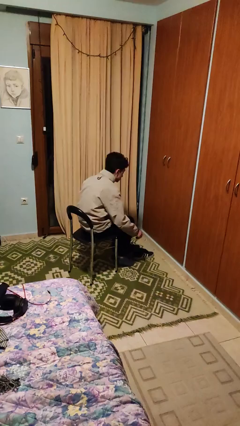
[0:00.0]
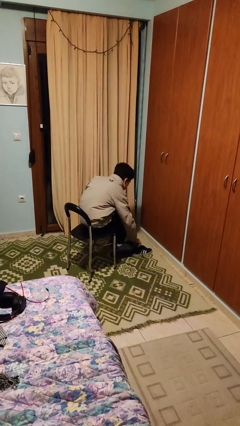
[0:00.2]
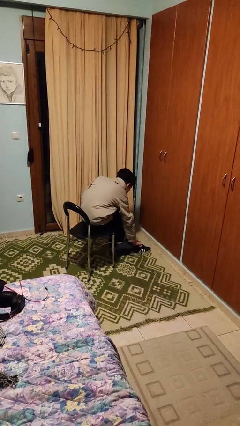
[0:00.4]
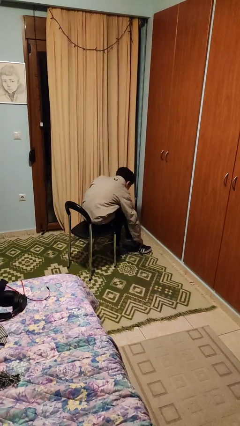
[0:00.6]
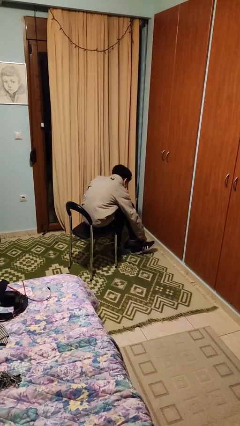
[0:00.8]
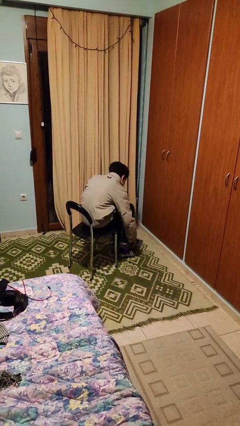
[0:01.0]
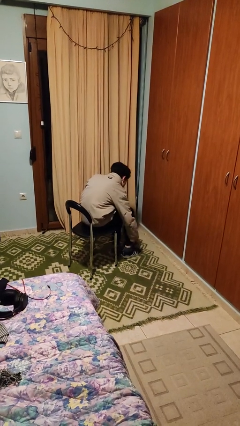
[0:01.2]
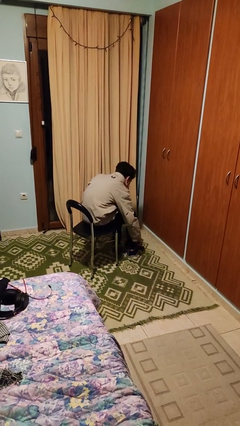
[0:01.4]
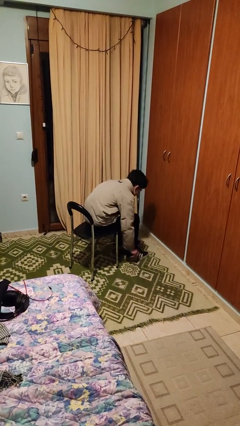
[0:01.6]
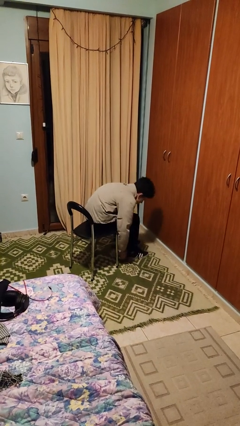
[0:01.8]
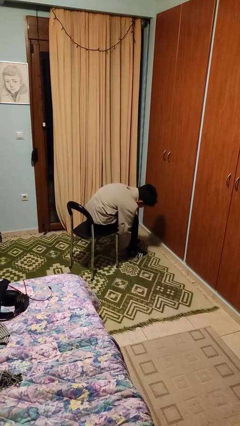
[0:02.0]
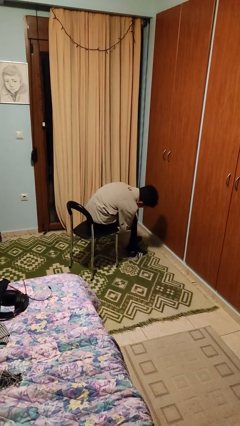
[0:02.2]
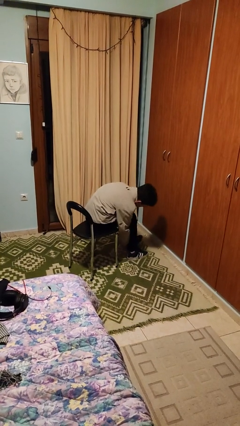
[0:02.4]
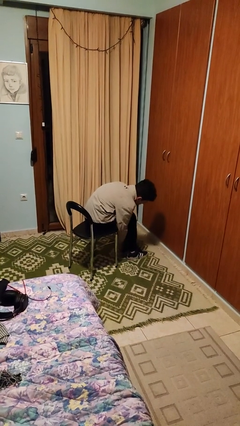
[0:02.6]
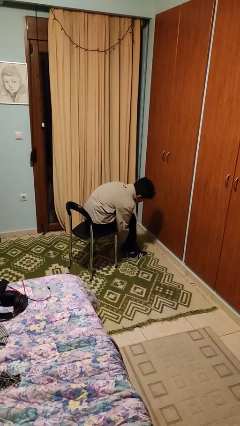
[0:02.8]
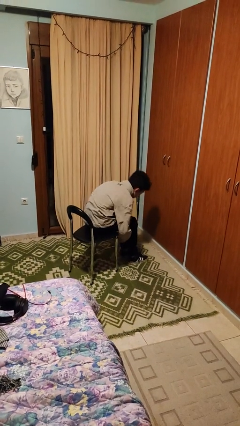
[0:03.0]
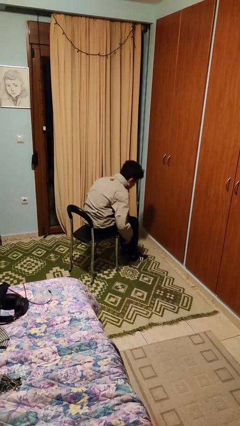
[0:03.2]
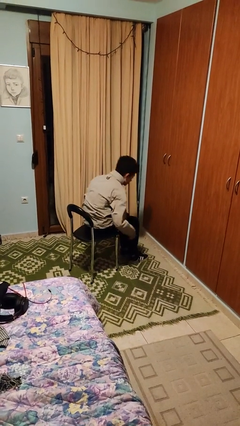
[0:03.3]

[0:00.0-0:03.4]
person puts on shoes

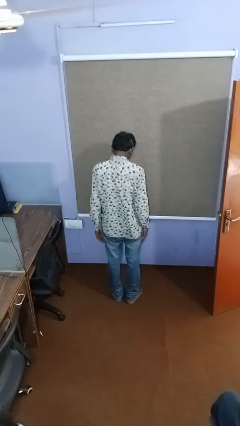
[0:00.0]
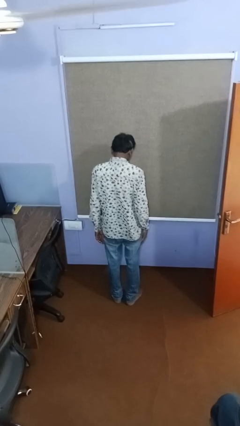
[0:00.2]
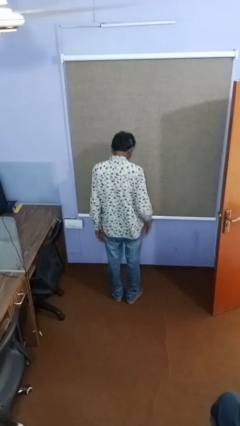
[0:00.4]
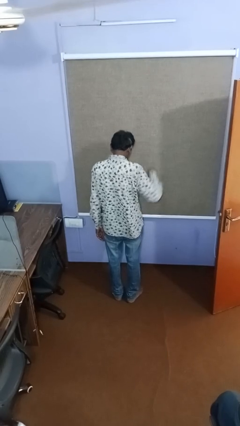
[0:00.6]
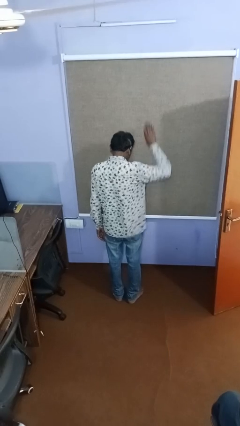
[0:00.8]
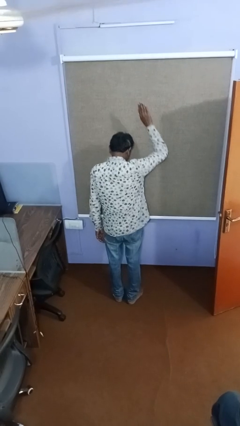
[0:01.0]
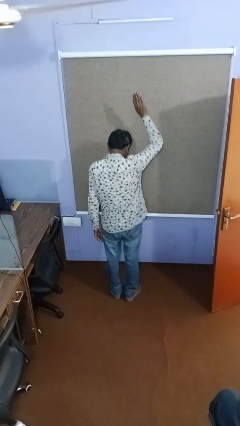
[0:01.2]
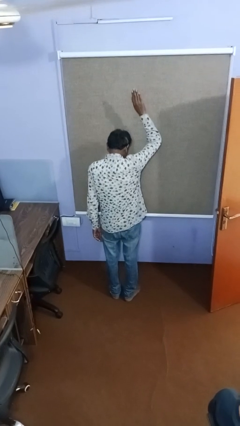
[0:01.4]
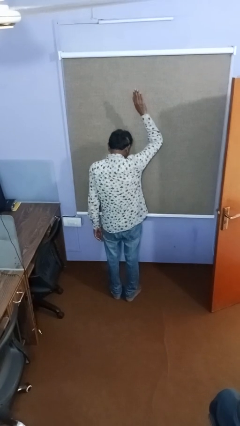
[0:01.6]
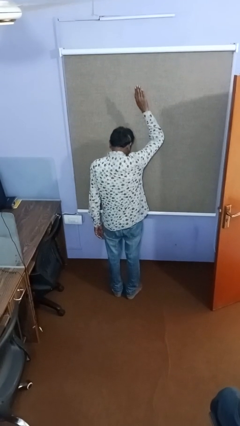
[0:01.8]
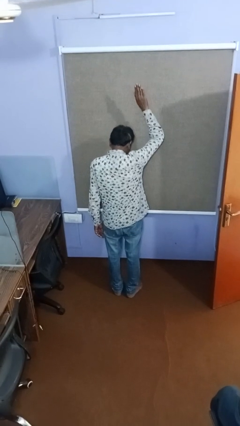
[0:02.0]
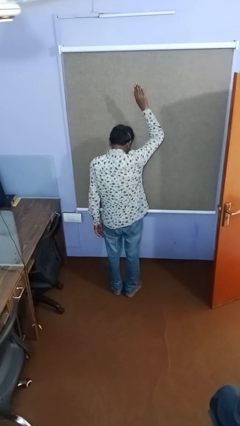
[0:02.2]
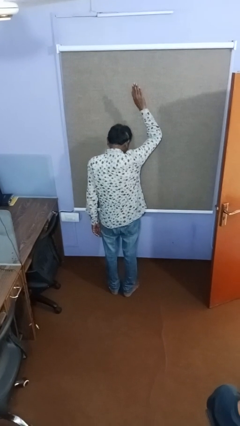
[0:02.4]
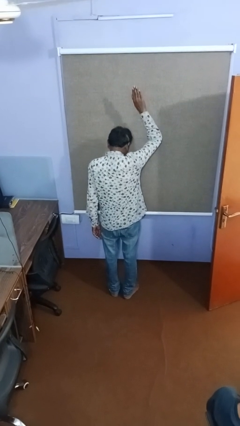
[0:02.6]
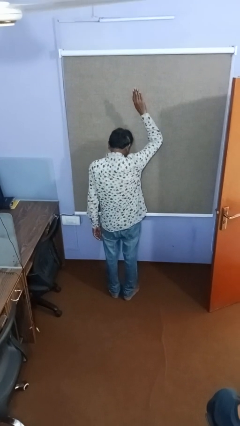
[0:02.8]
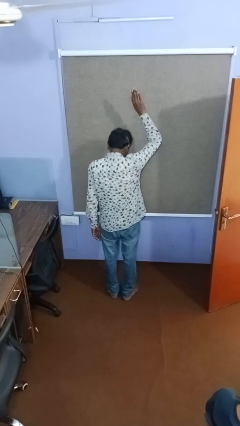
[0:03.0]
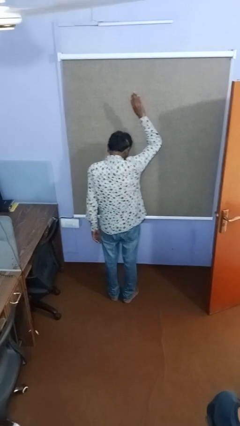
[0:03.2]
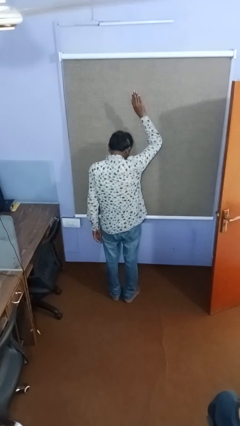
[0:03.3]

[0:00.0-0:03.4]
person gestures raise hand

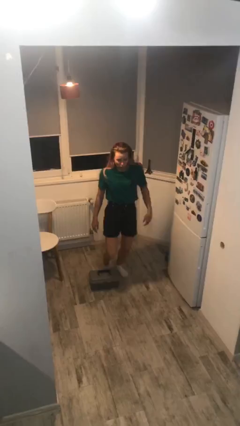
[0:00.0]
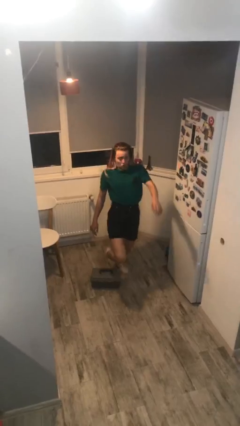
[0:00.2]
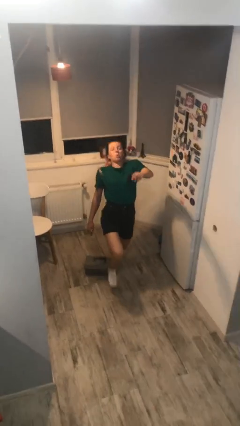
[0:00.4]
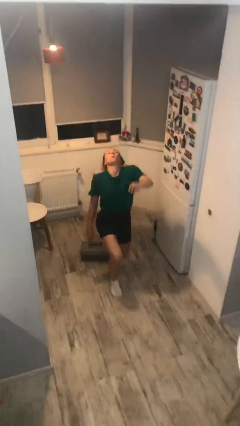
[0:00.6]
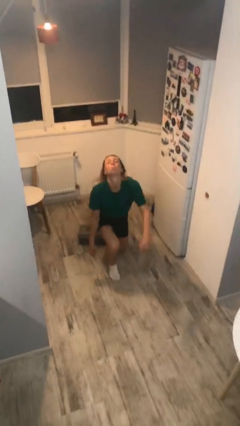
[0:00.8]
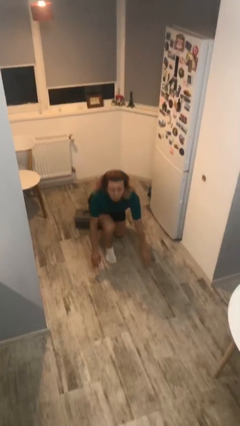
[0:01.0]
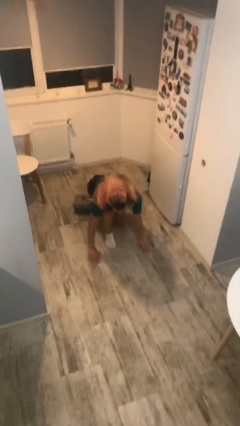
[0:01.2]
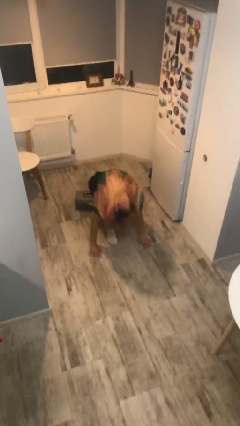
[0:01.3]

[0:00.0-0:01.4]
person trips on object on floor

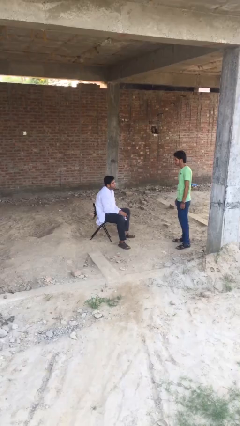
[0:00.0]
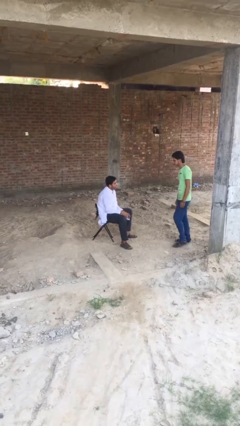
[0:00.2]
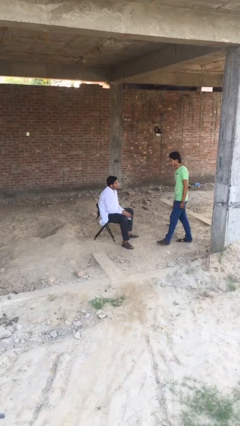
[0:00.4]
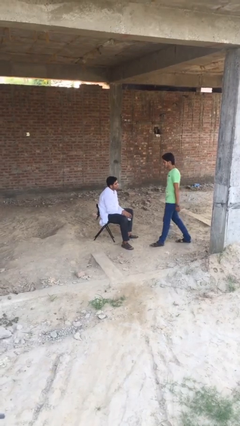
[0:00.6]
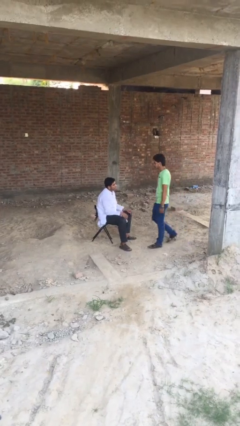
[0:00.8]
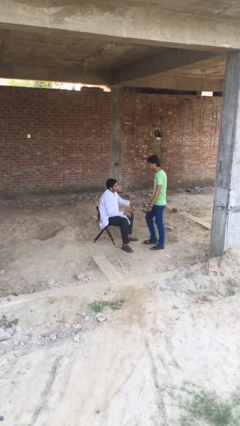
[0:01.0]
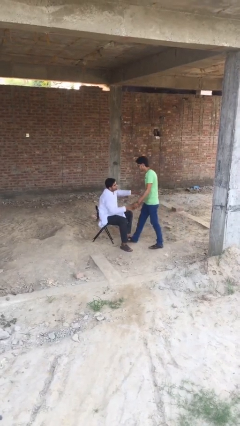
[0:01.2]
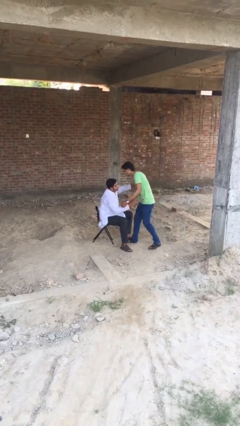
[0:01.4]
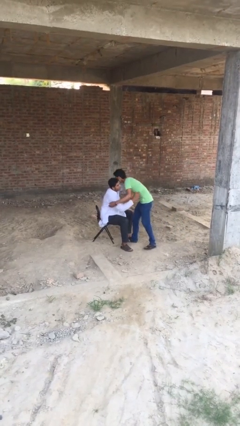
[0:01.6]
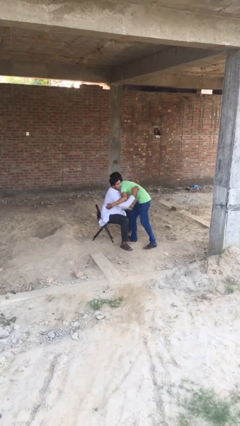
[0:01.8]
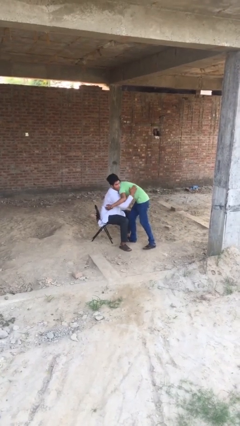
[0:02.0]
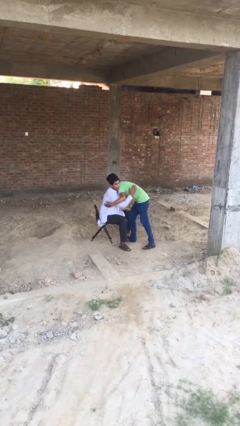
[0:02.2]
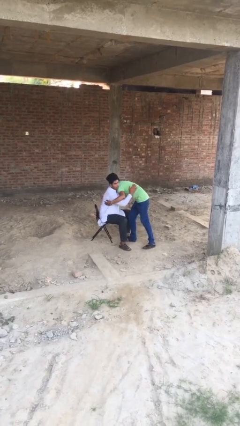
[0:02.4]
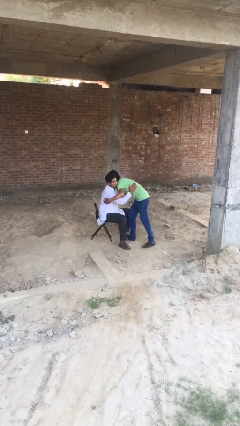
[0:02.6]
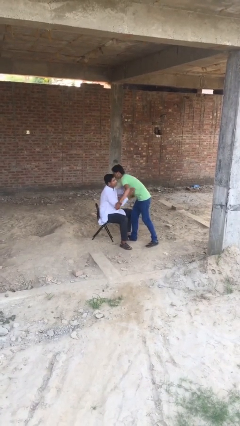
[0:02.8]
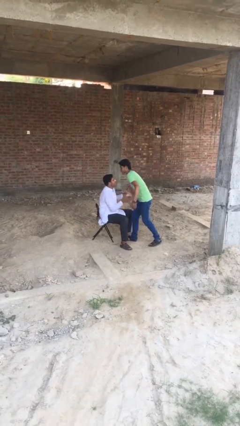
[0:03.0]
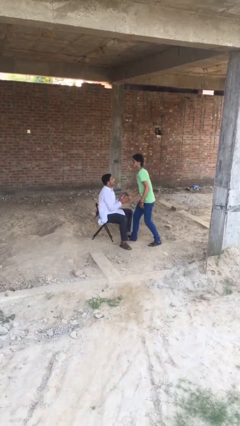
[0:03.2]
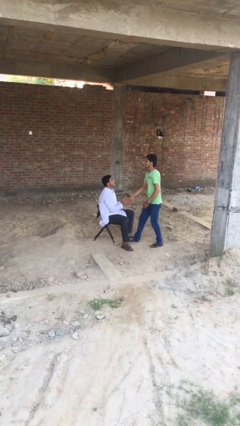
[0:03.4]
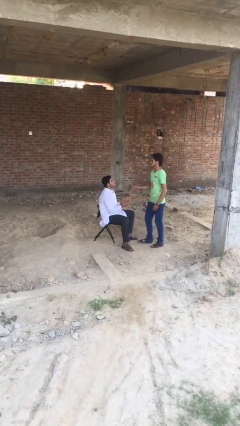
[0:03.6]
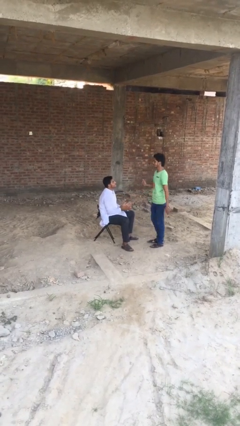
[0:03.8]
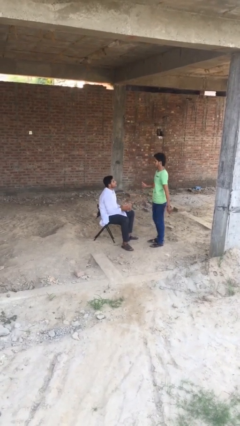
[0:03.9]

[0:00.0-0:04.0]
person embraces person

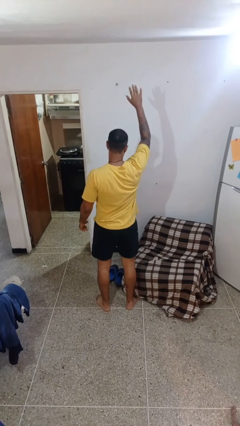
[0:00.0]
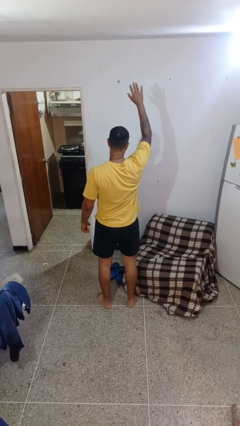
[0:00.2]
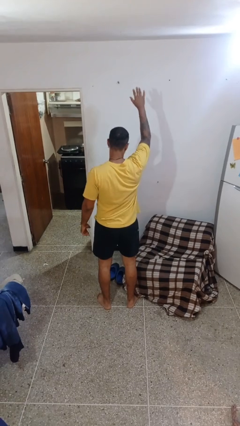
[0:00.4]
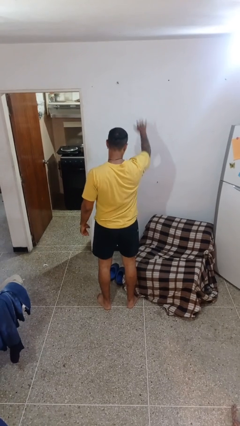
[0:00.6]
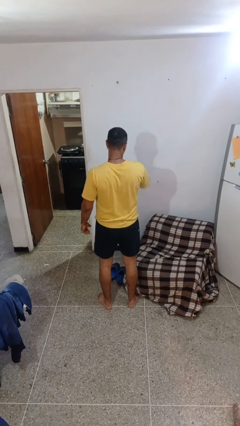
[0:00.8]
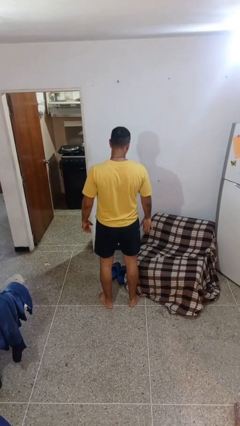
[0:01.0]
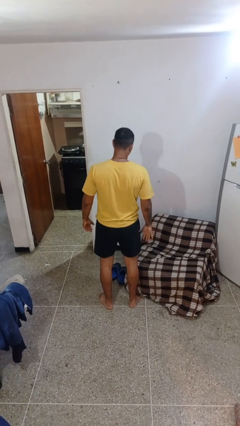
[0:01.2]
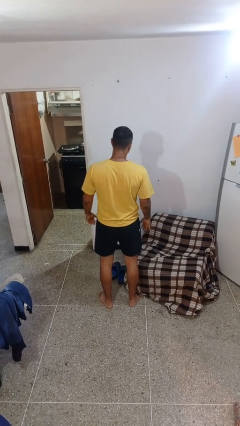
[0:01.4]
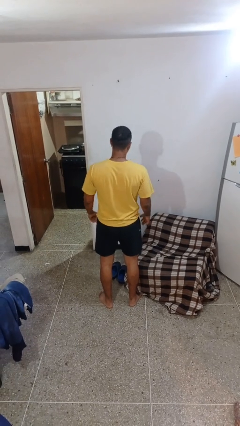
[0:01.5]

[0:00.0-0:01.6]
person gestures swipe down

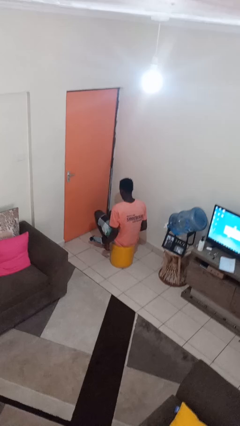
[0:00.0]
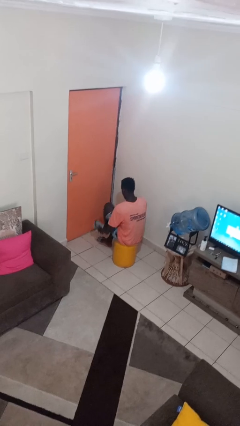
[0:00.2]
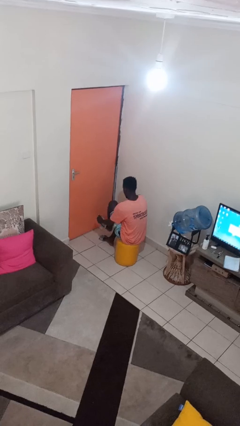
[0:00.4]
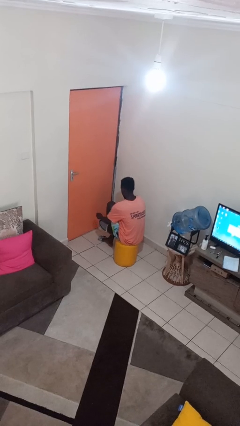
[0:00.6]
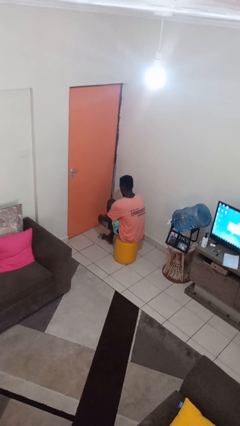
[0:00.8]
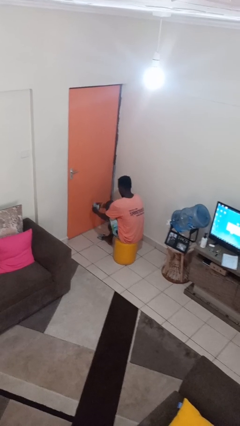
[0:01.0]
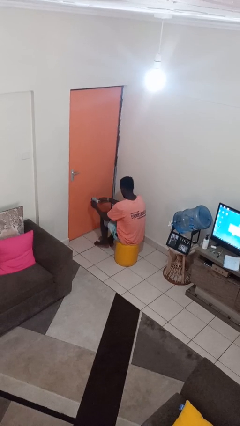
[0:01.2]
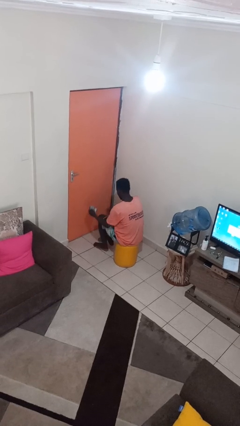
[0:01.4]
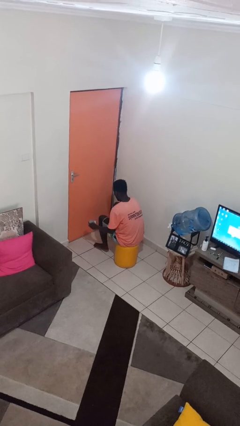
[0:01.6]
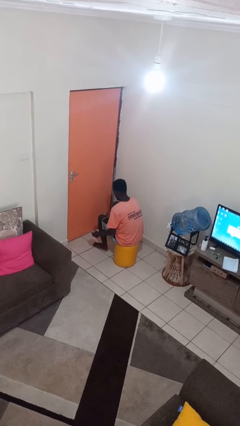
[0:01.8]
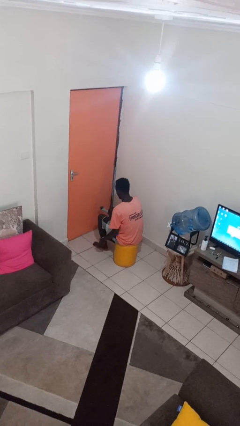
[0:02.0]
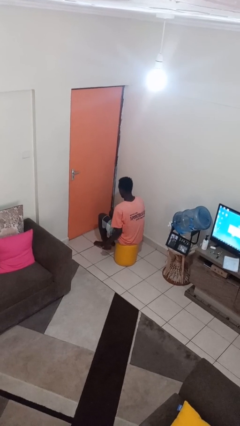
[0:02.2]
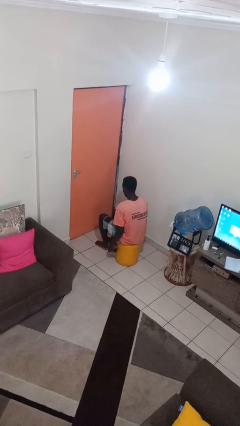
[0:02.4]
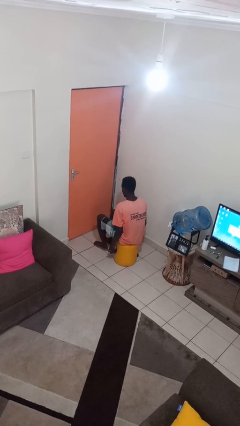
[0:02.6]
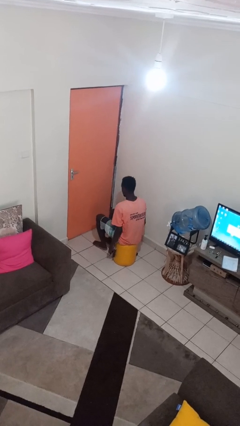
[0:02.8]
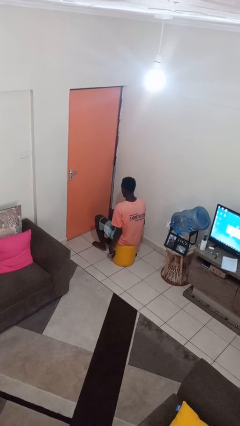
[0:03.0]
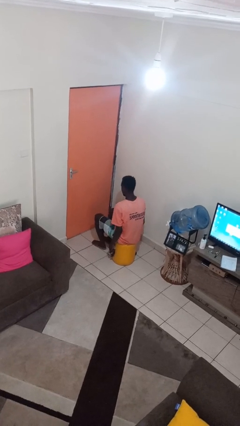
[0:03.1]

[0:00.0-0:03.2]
person takes off socks

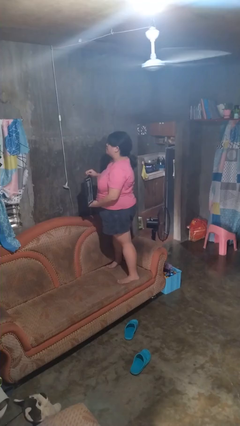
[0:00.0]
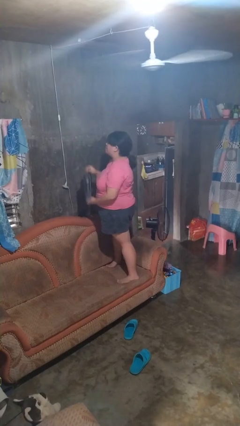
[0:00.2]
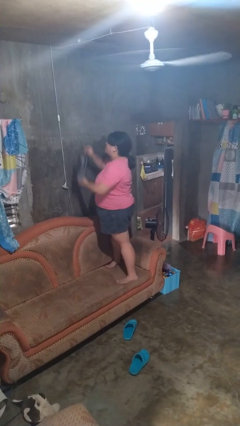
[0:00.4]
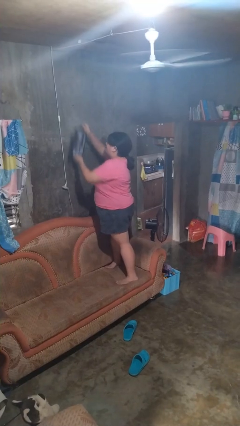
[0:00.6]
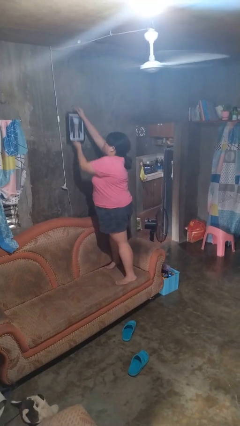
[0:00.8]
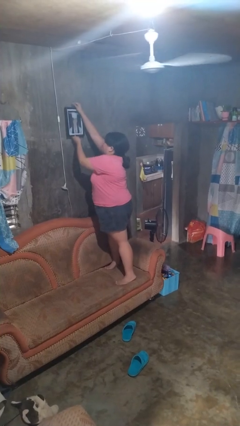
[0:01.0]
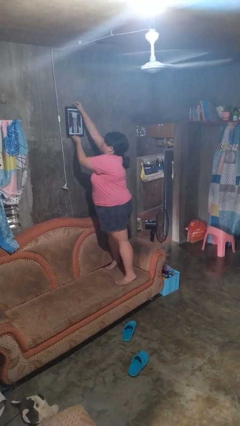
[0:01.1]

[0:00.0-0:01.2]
person puts up picture frame
